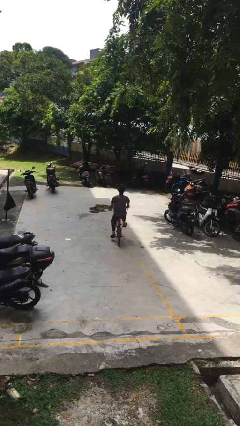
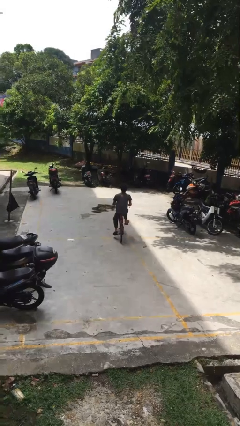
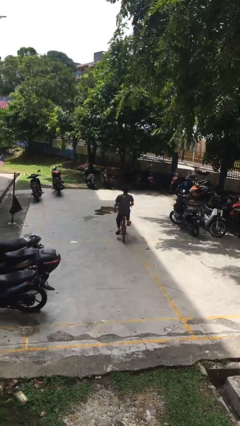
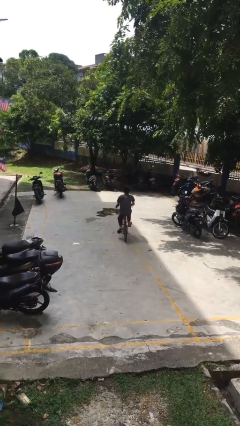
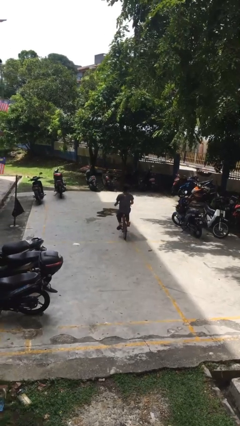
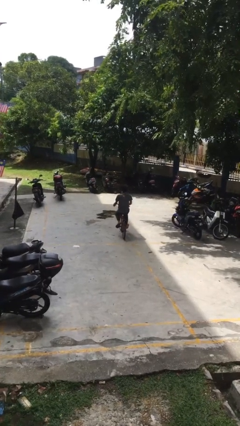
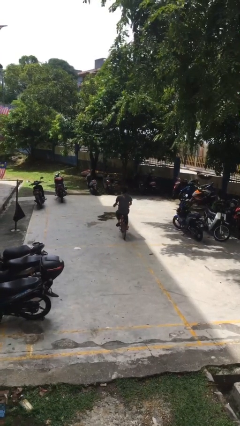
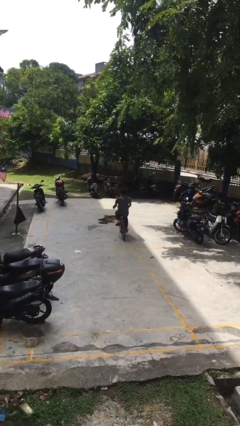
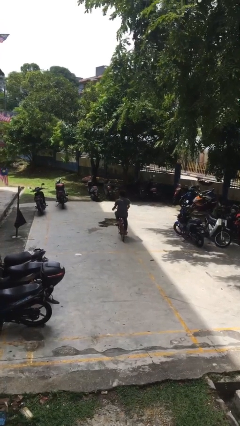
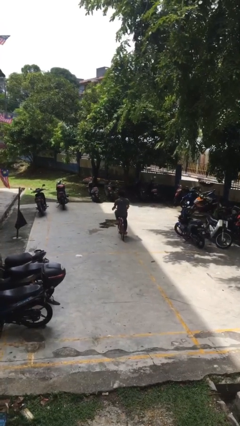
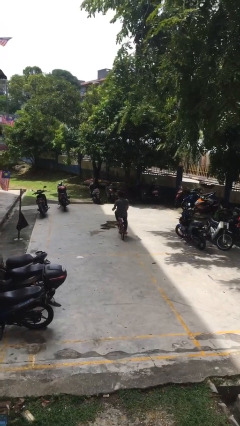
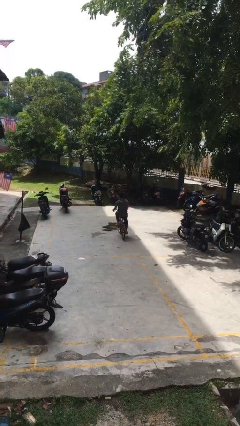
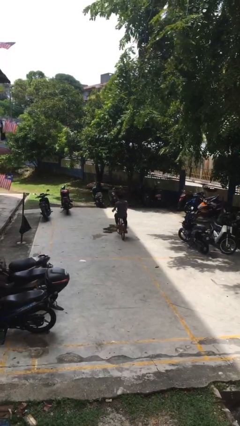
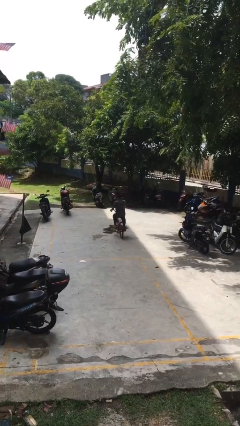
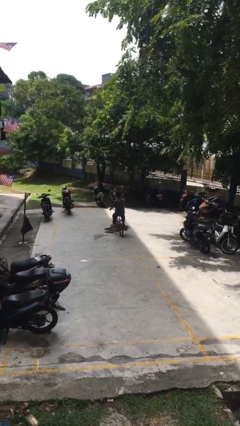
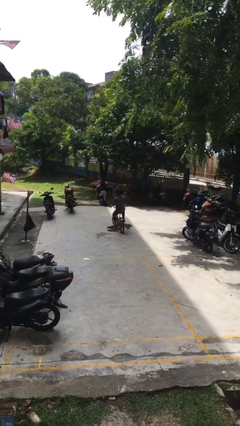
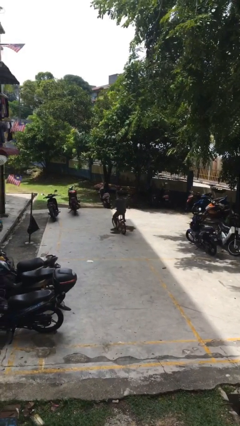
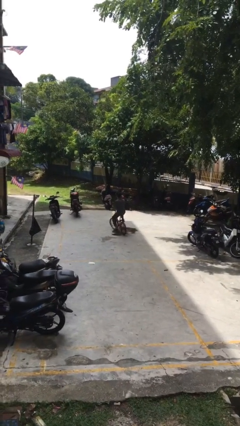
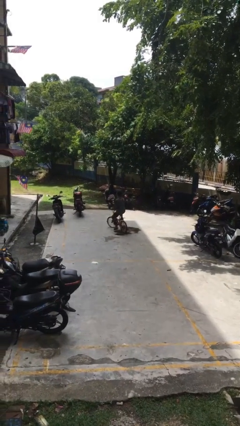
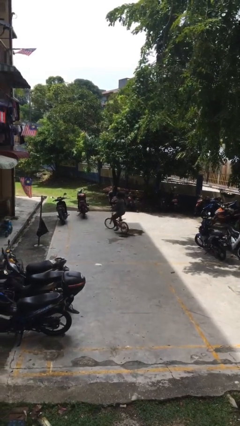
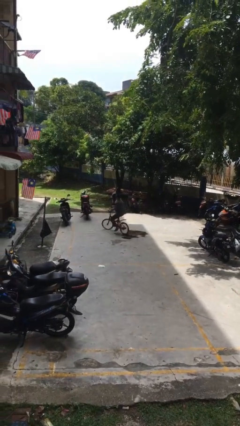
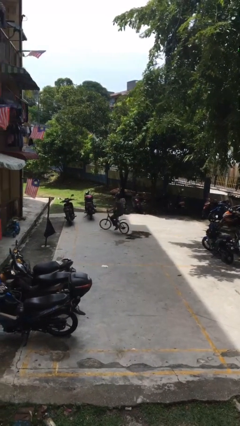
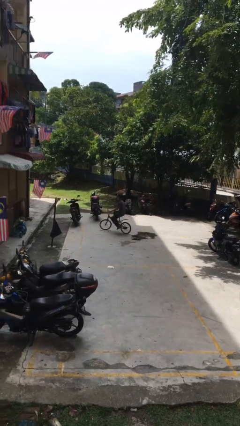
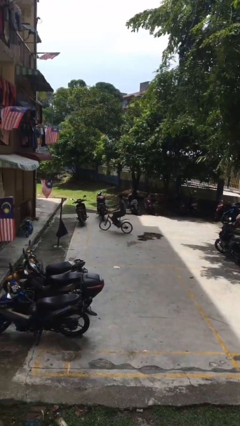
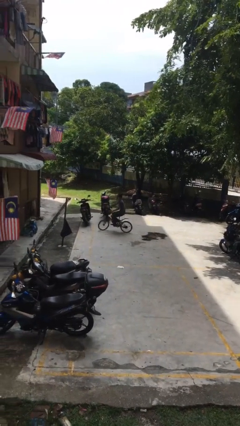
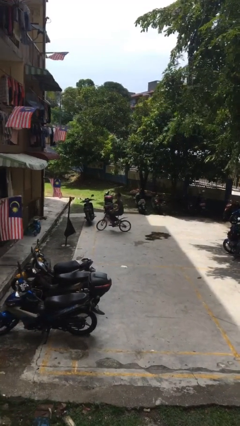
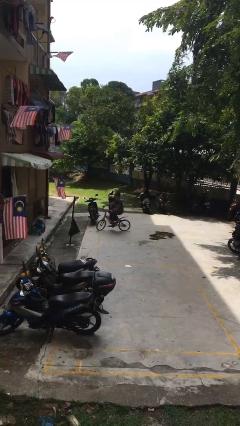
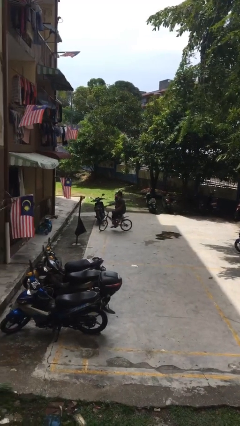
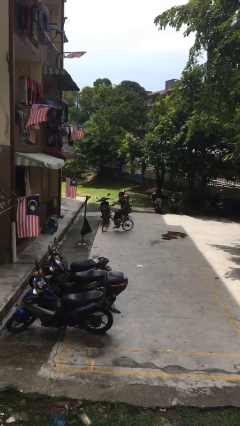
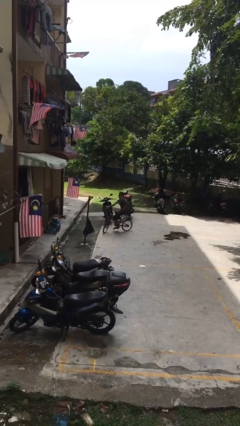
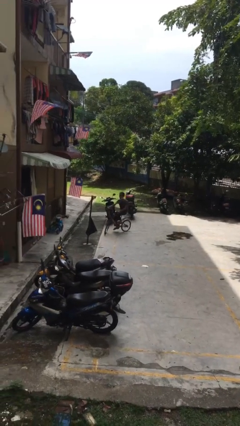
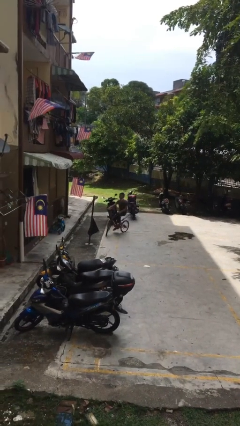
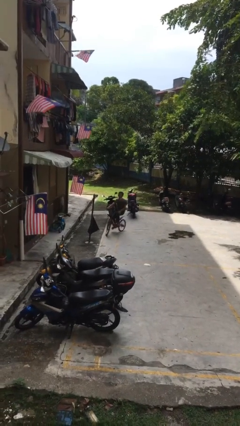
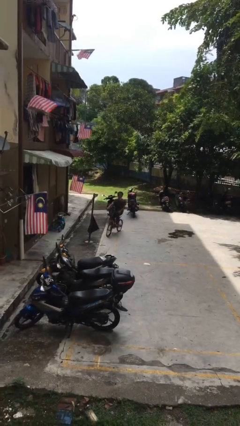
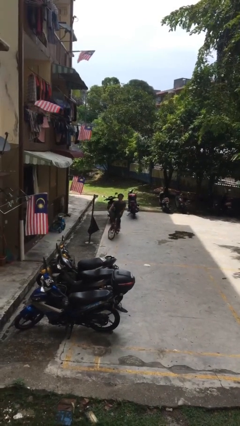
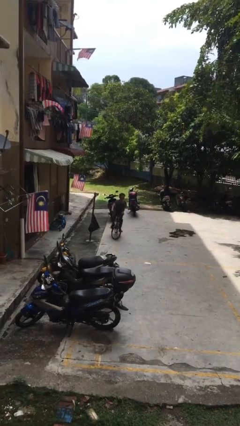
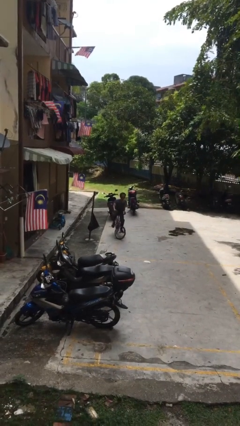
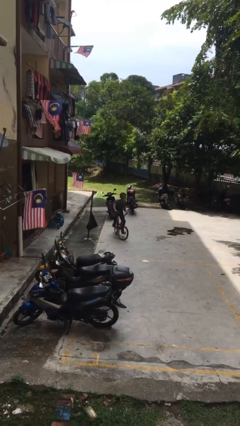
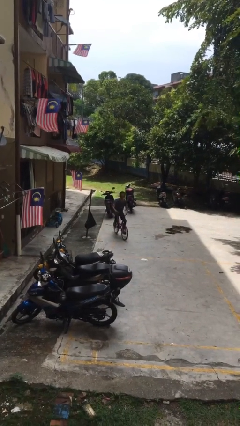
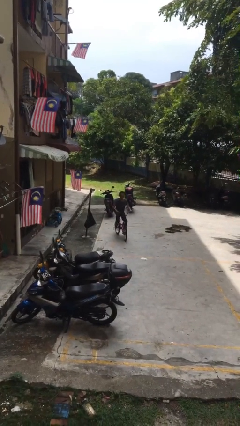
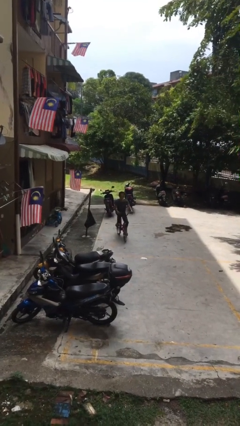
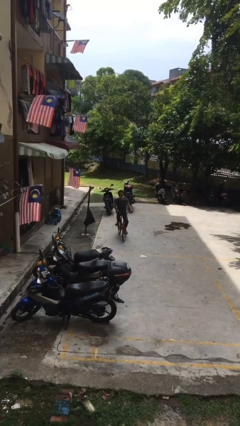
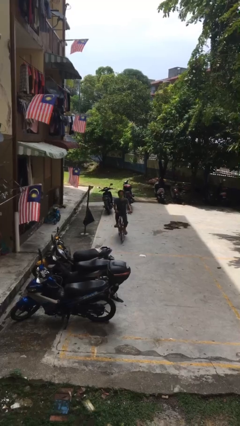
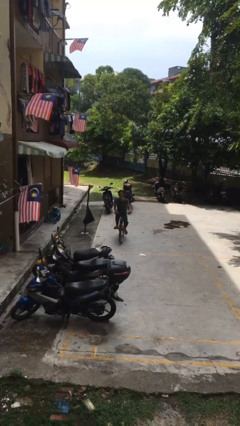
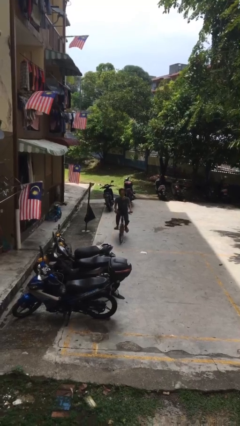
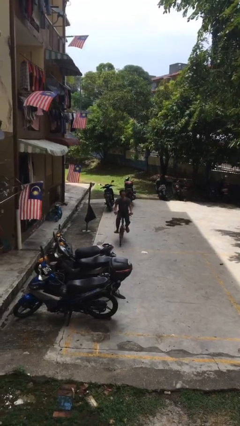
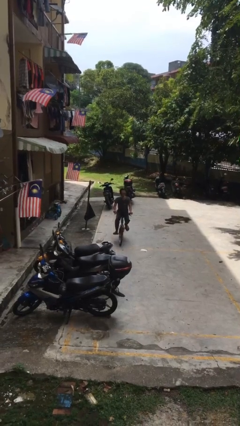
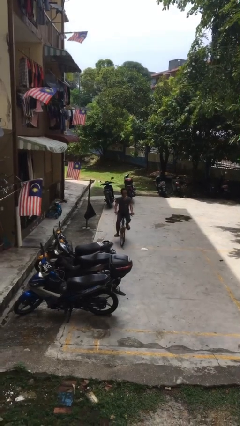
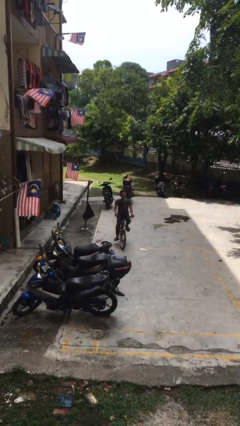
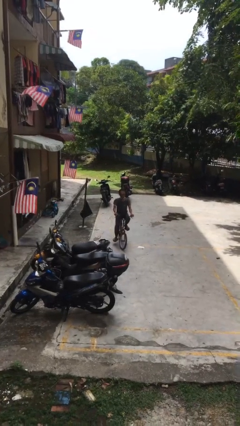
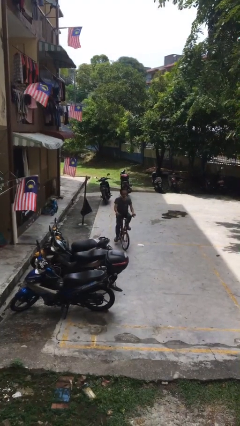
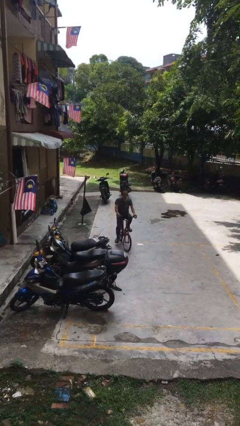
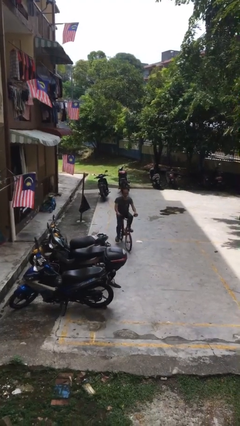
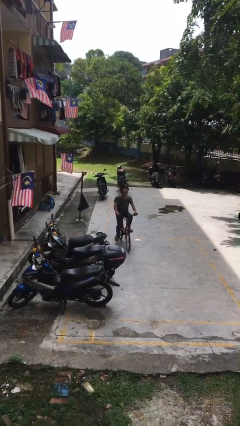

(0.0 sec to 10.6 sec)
person rides bicycle

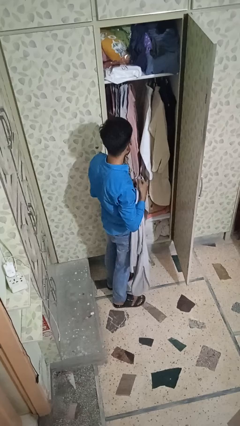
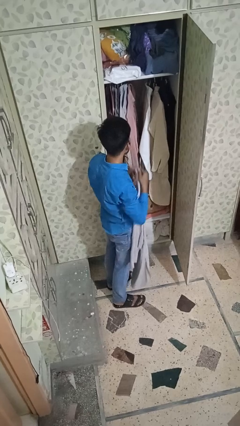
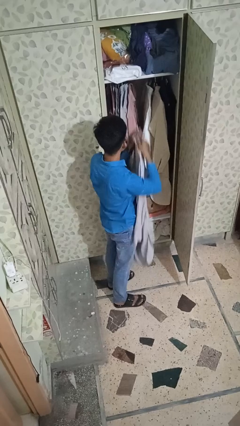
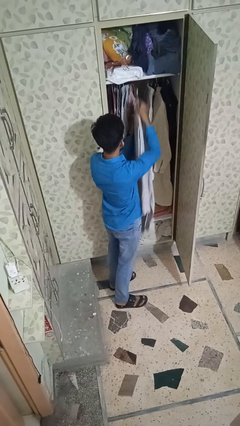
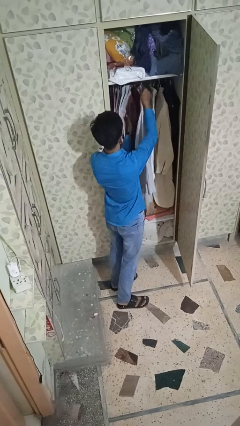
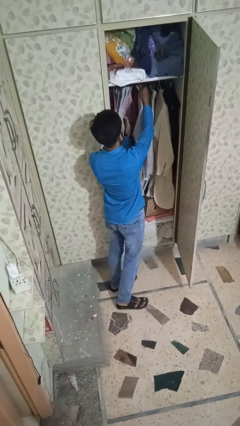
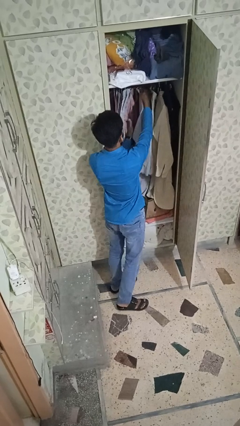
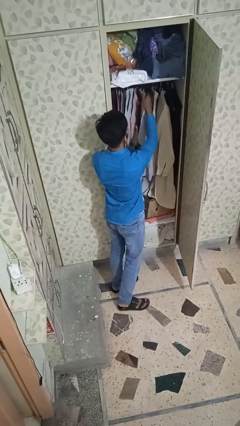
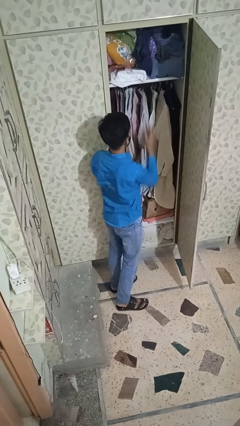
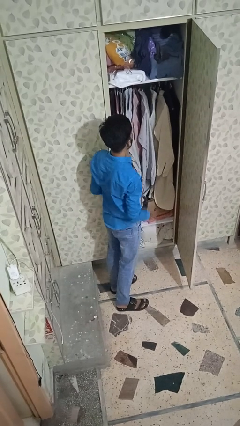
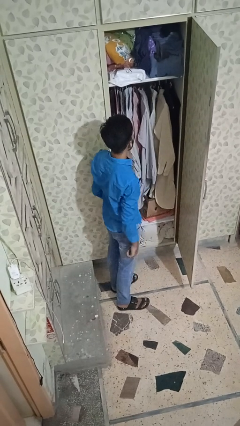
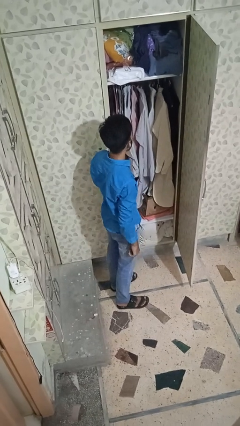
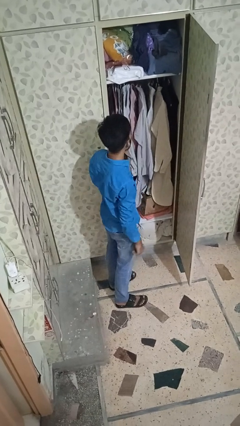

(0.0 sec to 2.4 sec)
person puts clothes into closet

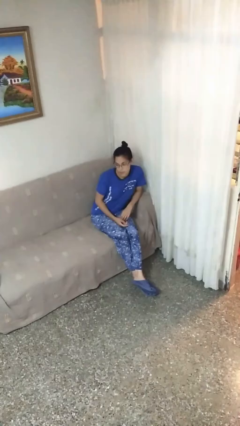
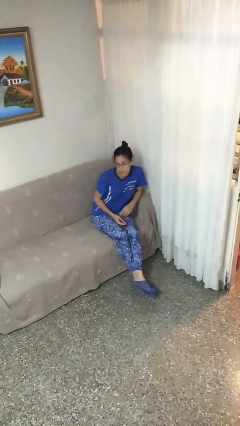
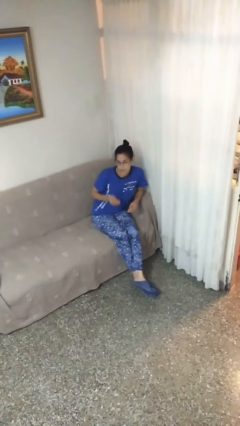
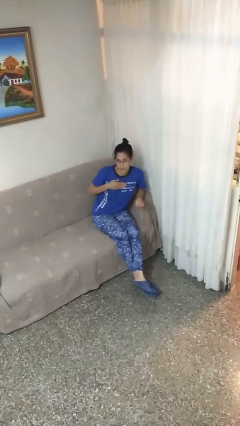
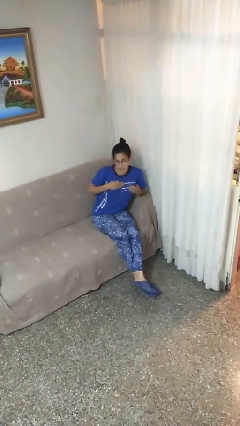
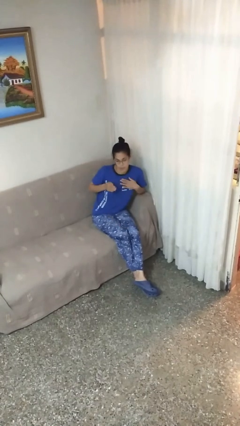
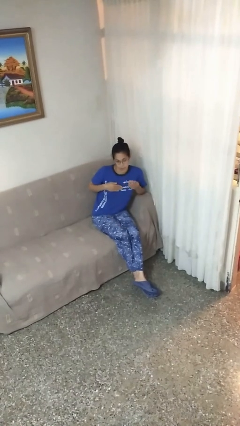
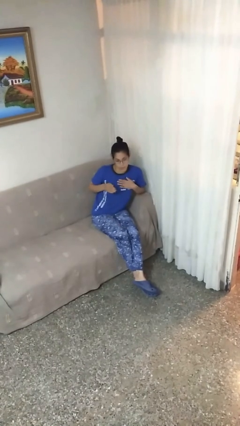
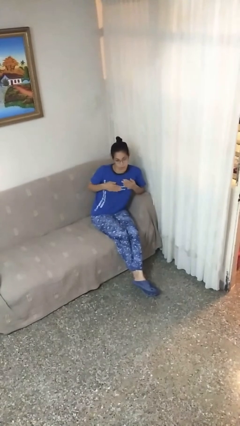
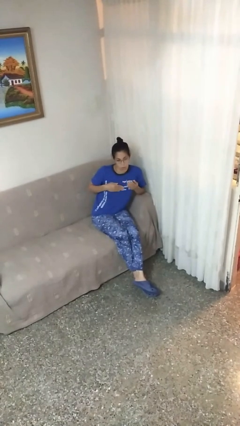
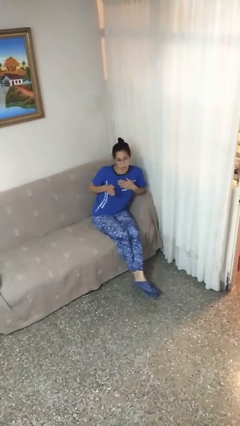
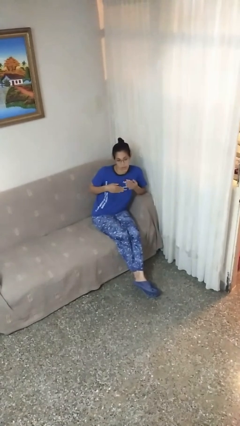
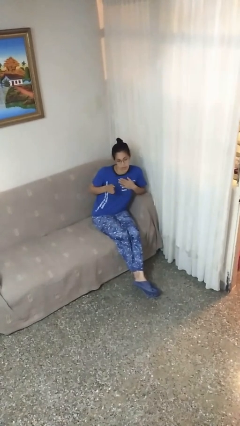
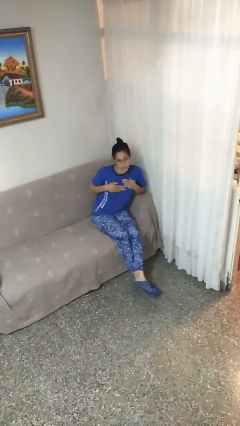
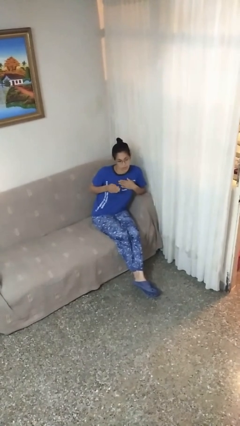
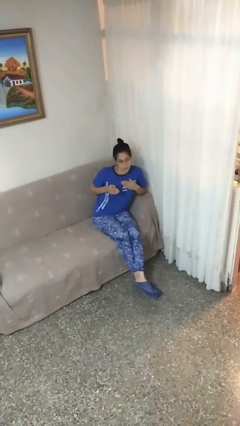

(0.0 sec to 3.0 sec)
person drums on chest

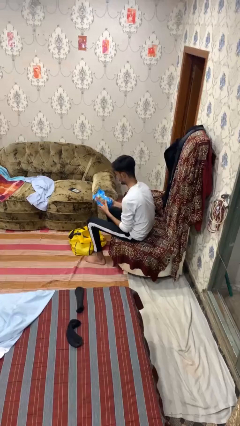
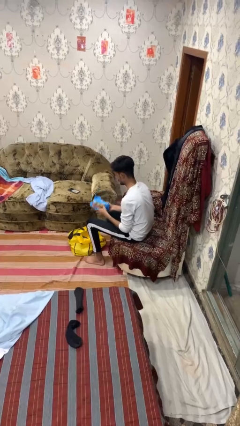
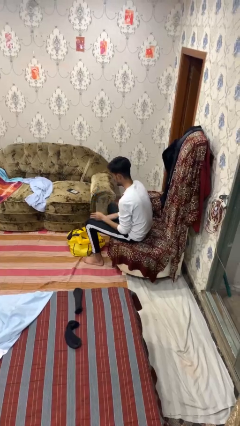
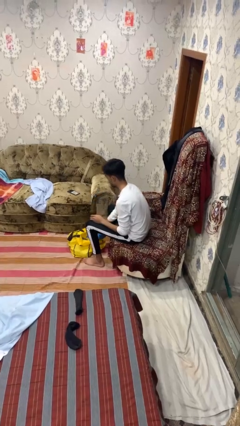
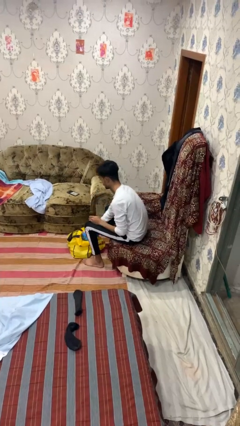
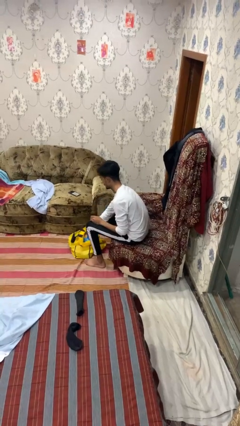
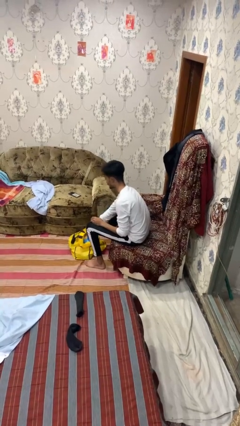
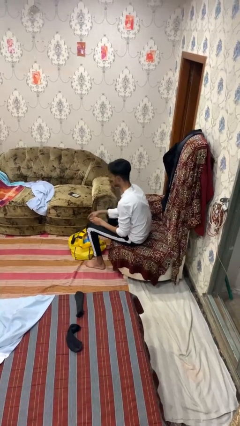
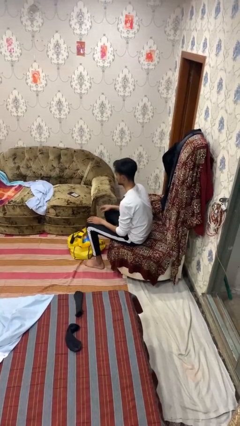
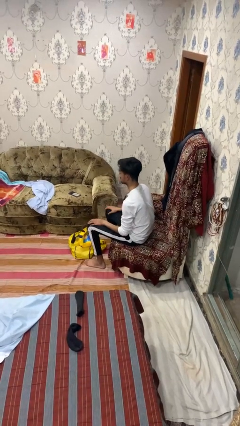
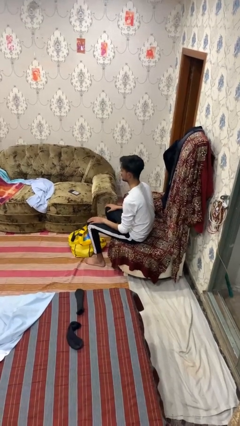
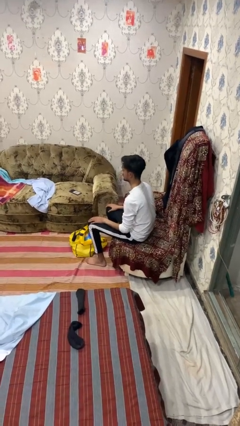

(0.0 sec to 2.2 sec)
person puts object into bag
